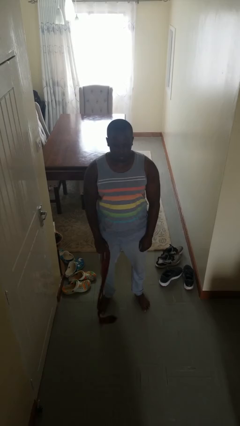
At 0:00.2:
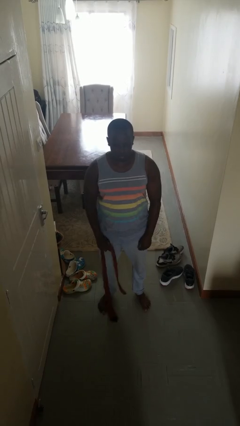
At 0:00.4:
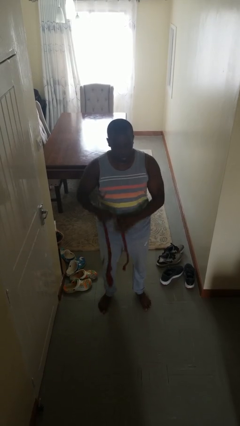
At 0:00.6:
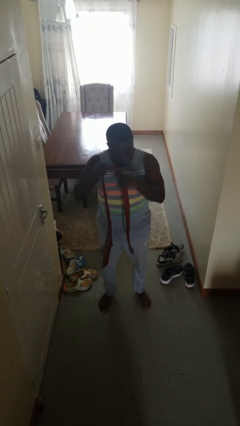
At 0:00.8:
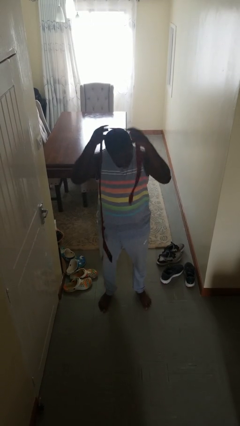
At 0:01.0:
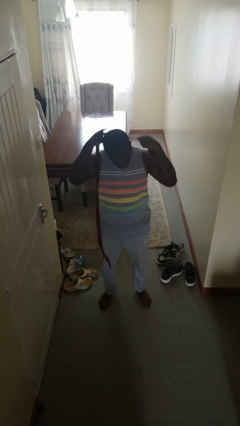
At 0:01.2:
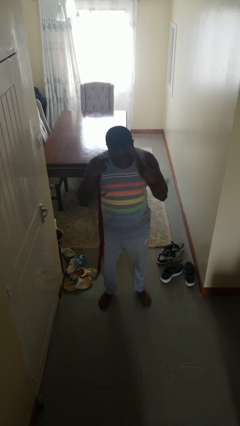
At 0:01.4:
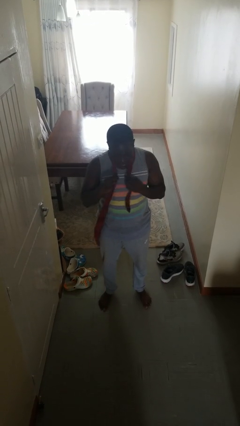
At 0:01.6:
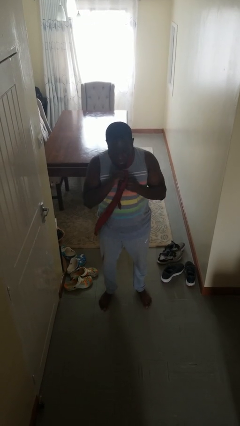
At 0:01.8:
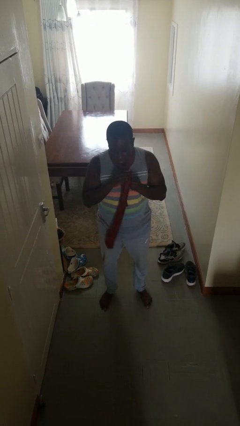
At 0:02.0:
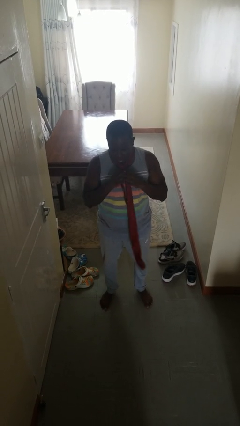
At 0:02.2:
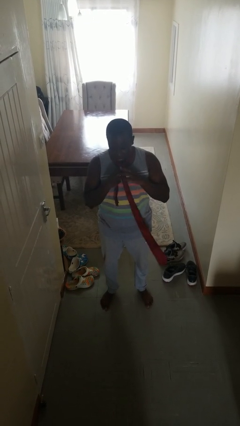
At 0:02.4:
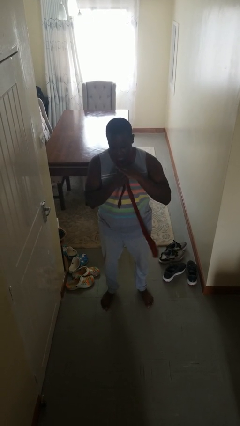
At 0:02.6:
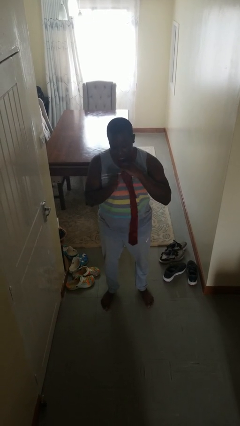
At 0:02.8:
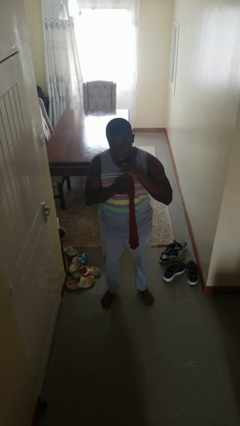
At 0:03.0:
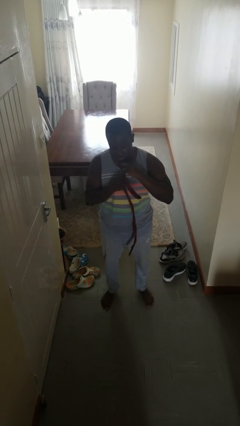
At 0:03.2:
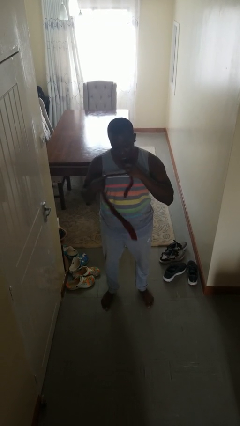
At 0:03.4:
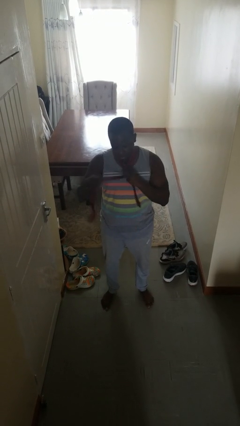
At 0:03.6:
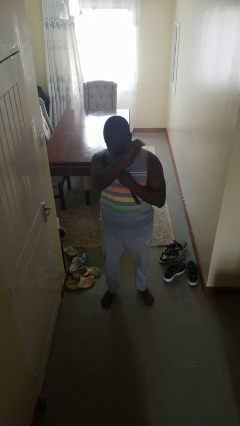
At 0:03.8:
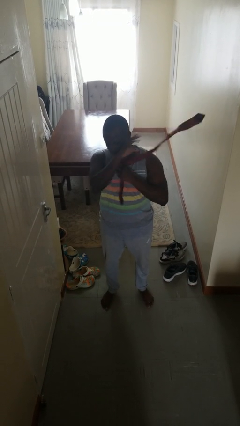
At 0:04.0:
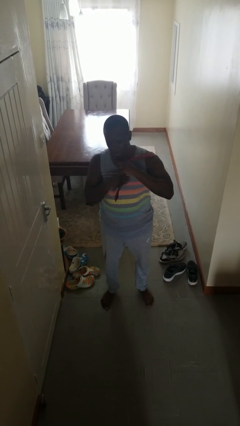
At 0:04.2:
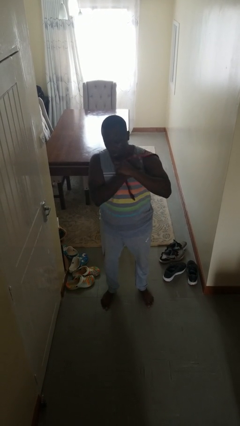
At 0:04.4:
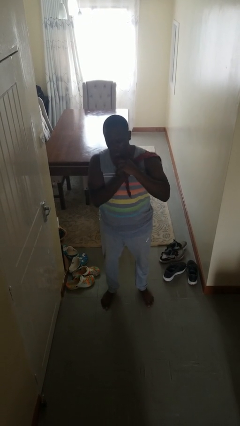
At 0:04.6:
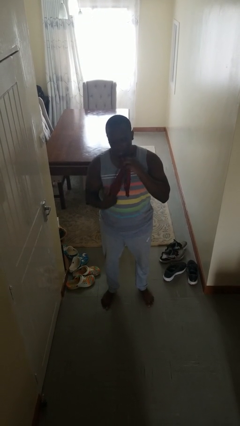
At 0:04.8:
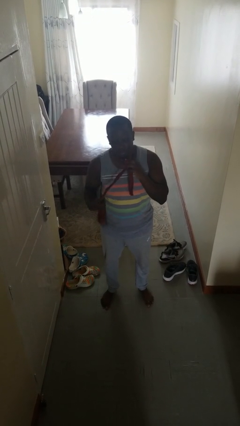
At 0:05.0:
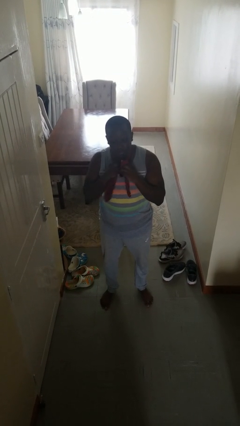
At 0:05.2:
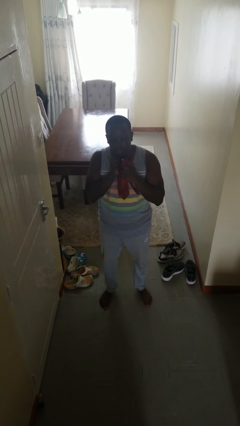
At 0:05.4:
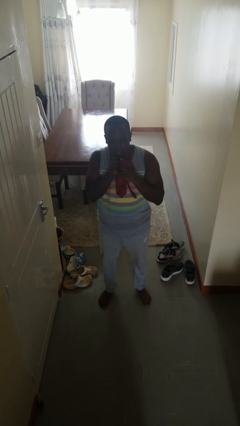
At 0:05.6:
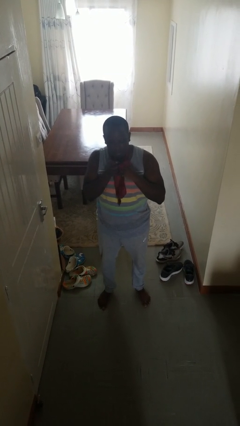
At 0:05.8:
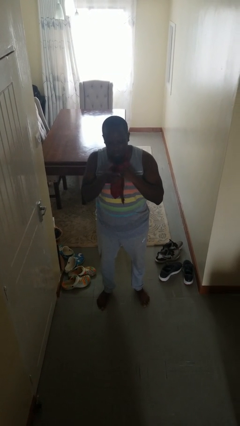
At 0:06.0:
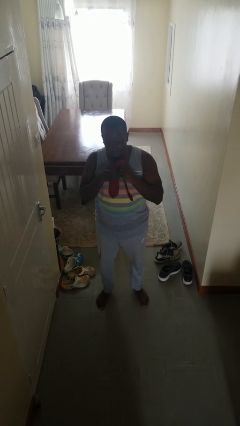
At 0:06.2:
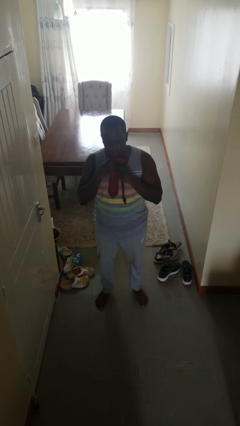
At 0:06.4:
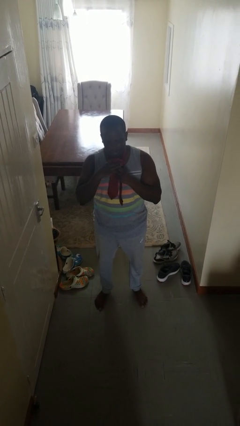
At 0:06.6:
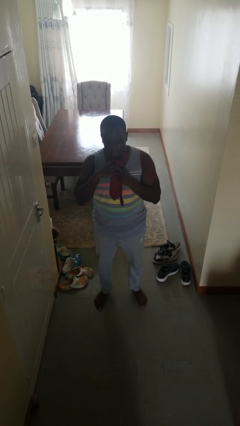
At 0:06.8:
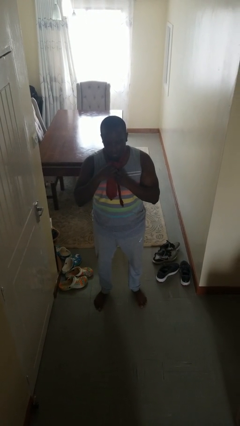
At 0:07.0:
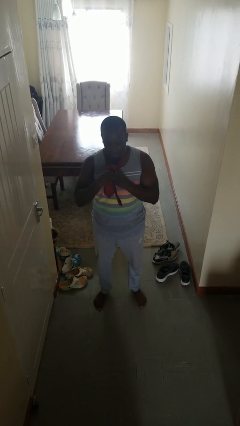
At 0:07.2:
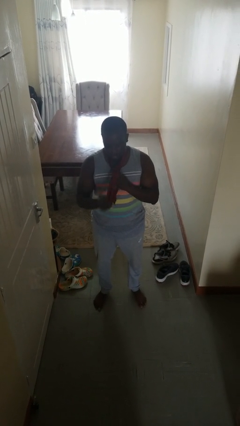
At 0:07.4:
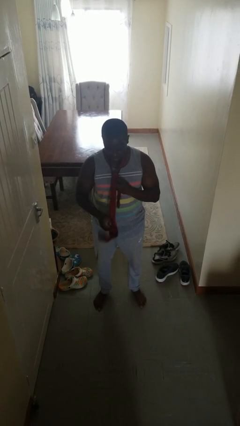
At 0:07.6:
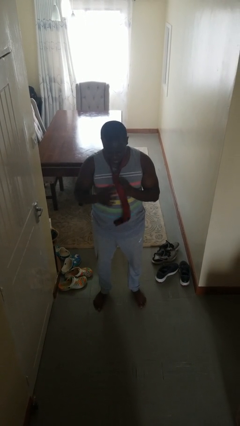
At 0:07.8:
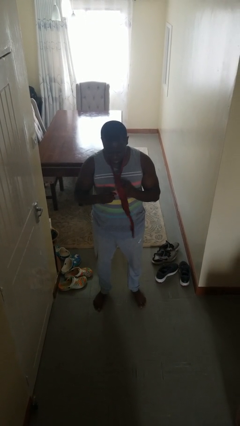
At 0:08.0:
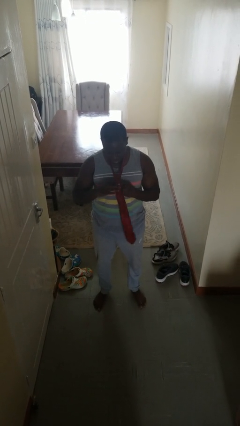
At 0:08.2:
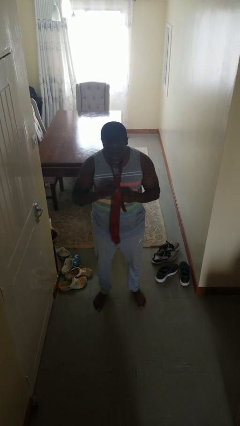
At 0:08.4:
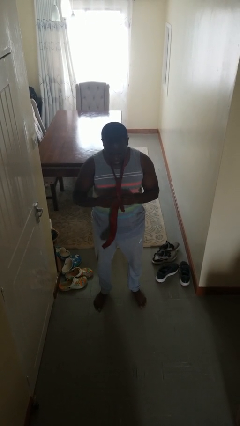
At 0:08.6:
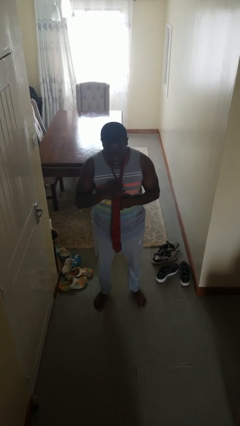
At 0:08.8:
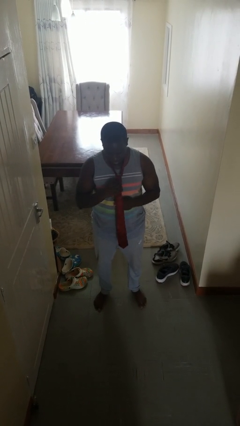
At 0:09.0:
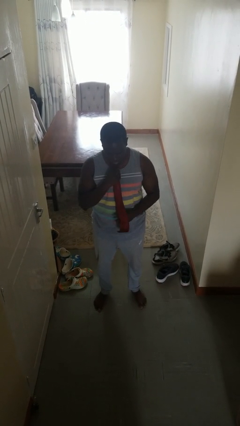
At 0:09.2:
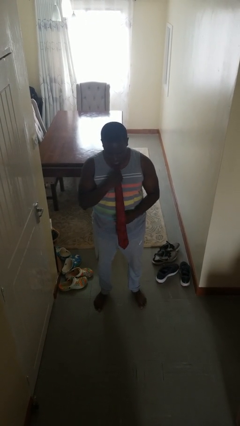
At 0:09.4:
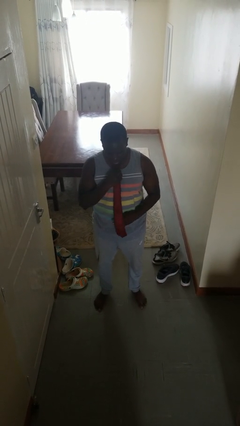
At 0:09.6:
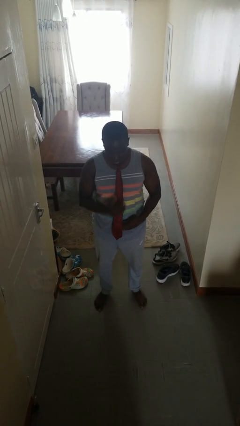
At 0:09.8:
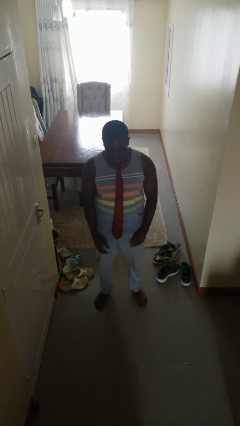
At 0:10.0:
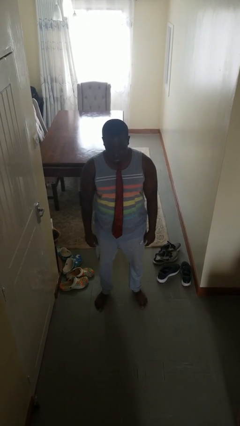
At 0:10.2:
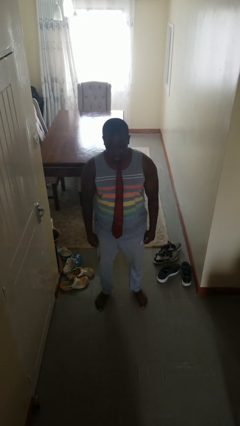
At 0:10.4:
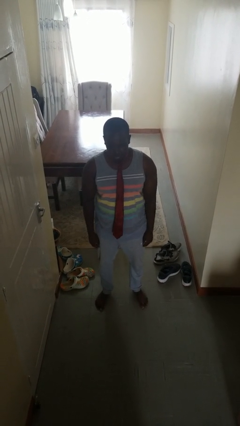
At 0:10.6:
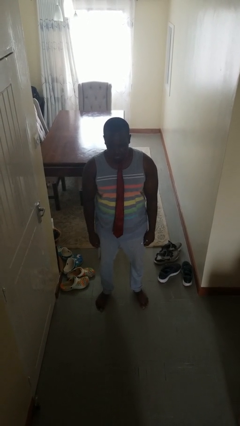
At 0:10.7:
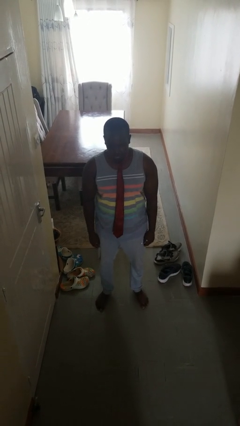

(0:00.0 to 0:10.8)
person puts on necktie

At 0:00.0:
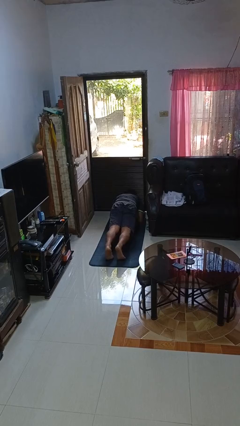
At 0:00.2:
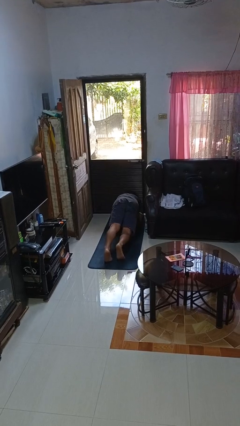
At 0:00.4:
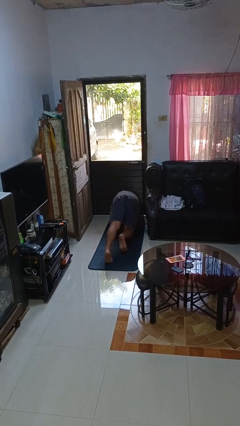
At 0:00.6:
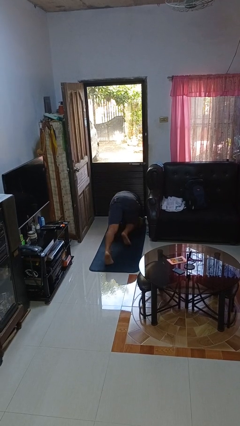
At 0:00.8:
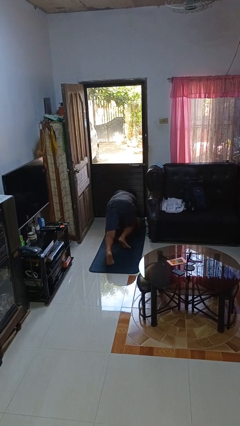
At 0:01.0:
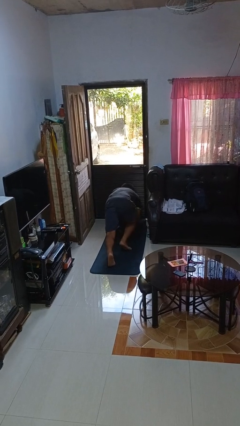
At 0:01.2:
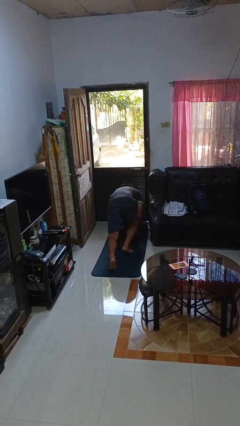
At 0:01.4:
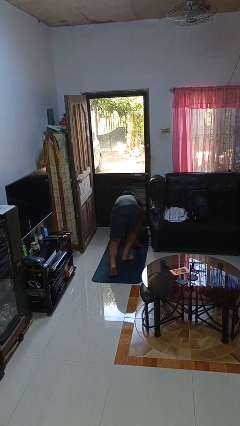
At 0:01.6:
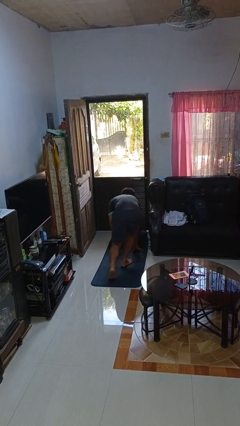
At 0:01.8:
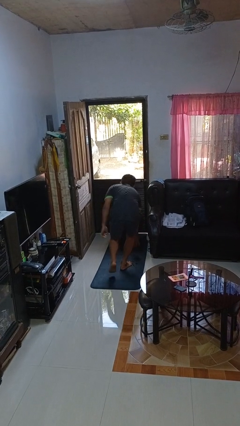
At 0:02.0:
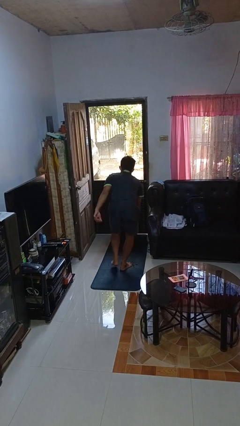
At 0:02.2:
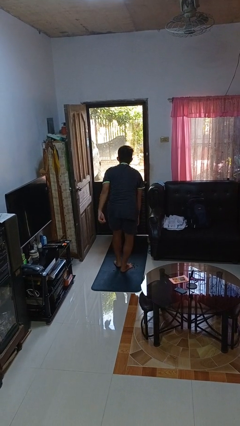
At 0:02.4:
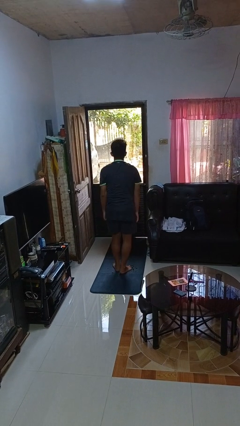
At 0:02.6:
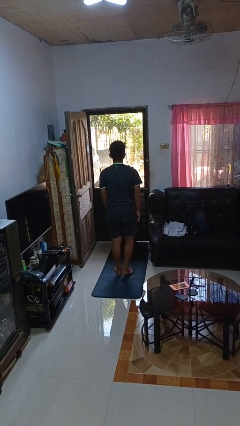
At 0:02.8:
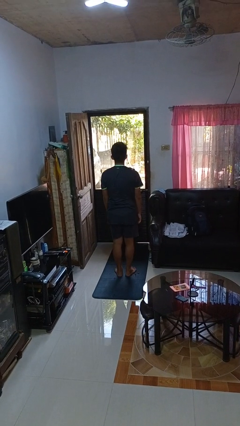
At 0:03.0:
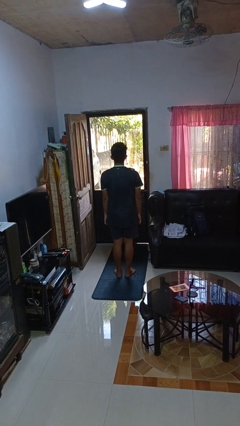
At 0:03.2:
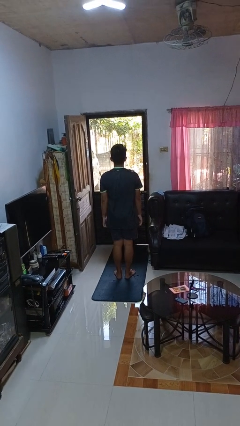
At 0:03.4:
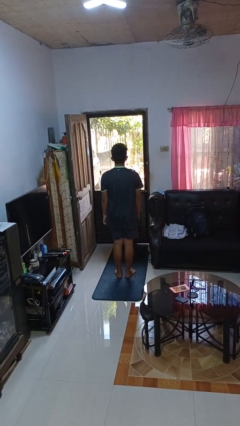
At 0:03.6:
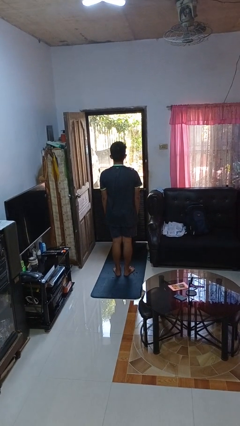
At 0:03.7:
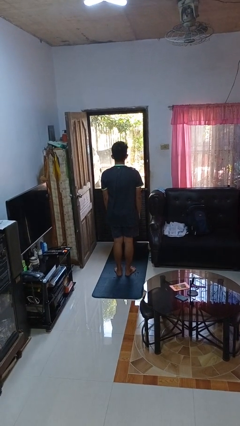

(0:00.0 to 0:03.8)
person stands up from floor

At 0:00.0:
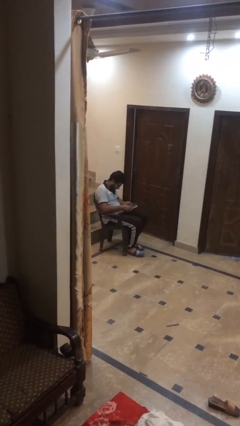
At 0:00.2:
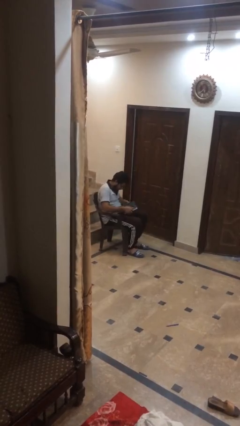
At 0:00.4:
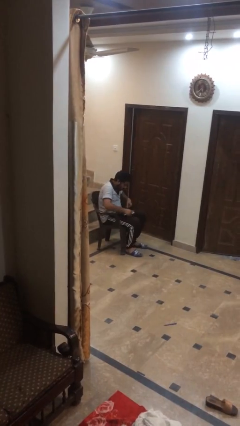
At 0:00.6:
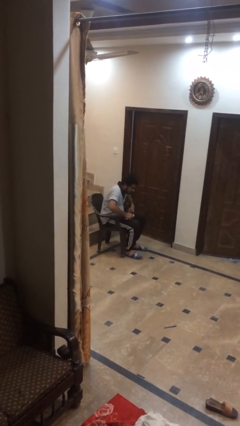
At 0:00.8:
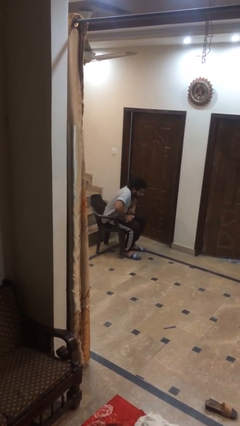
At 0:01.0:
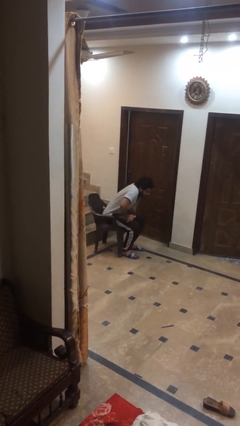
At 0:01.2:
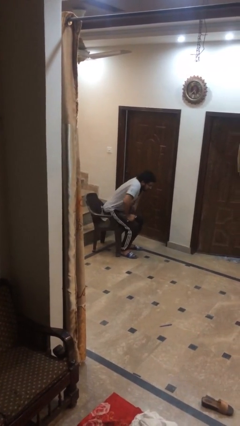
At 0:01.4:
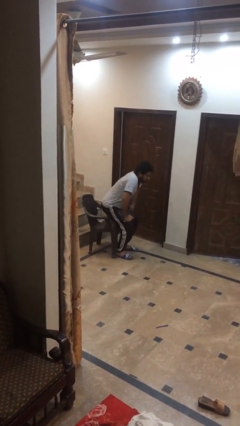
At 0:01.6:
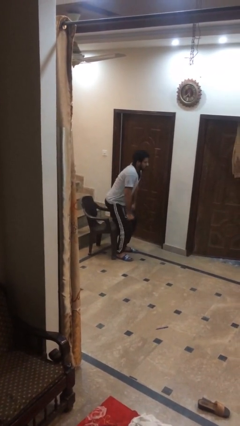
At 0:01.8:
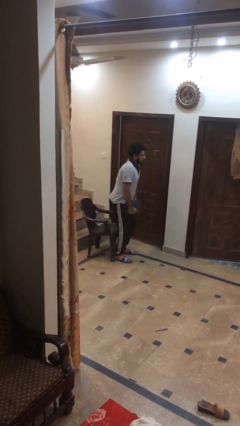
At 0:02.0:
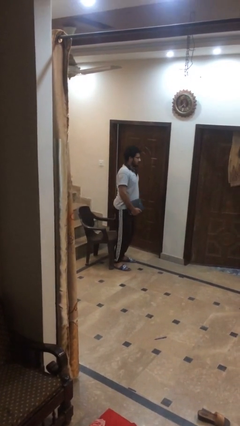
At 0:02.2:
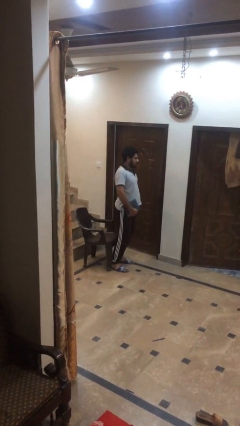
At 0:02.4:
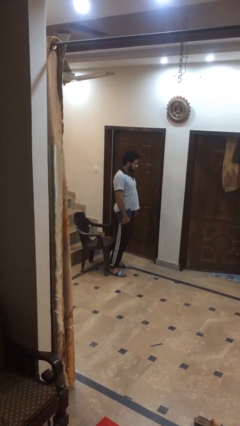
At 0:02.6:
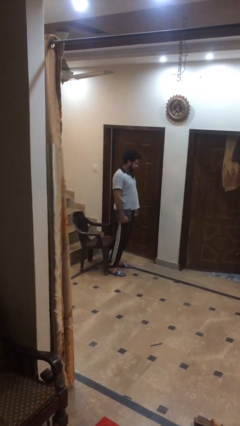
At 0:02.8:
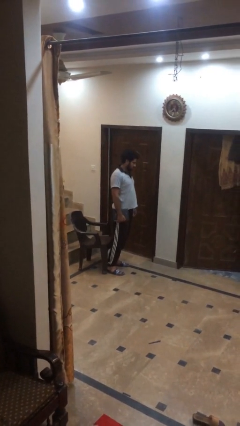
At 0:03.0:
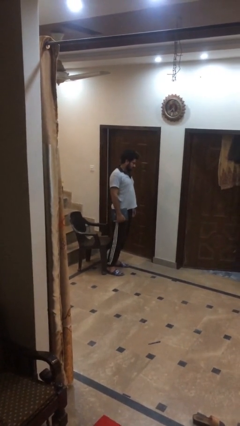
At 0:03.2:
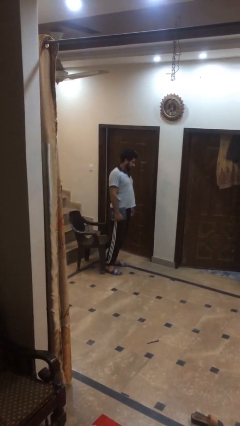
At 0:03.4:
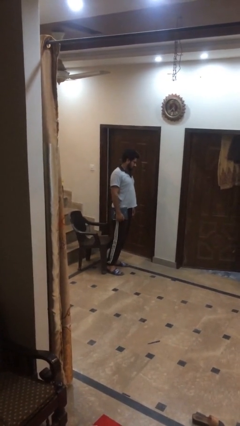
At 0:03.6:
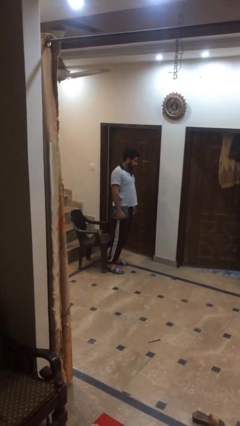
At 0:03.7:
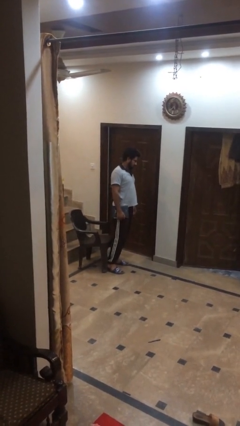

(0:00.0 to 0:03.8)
person stands up
